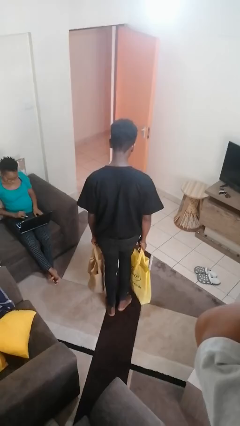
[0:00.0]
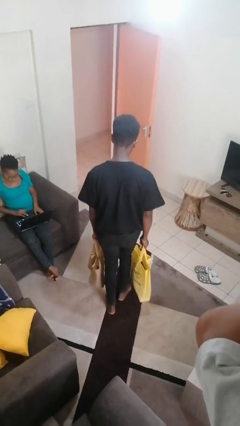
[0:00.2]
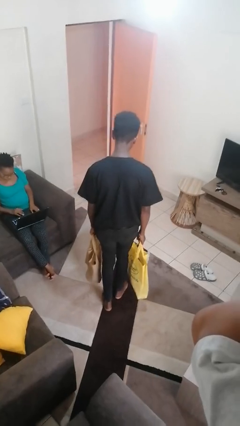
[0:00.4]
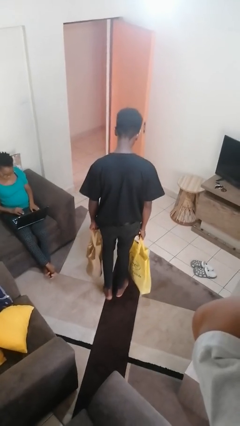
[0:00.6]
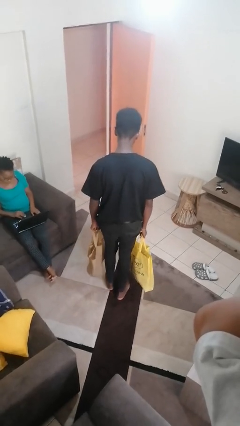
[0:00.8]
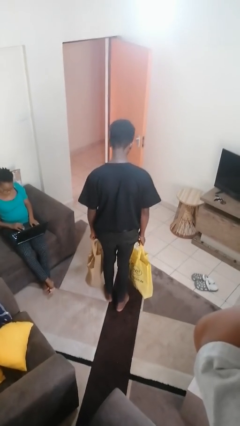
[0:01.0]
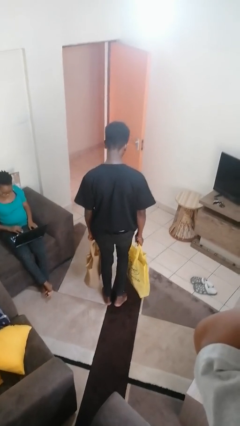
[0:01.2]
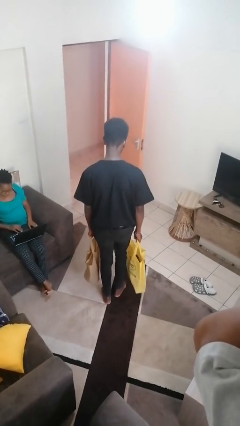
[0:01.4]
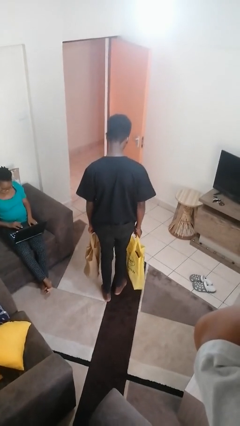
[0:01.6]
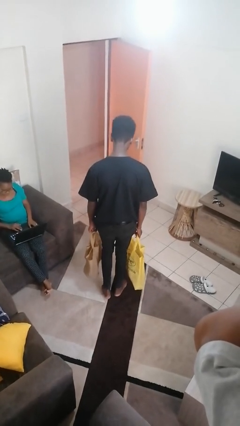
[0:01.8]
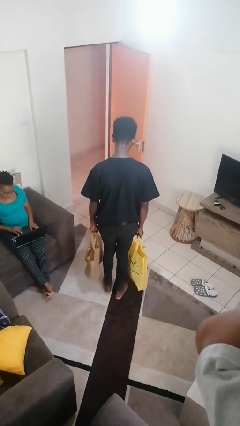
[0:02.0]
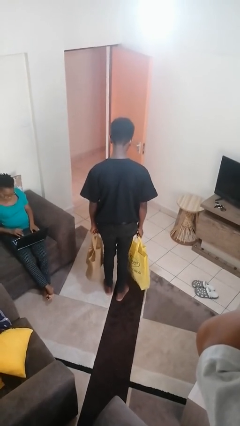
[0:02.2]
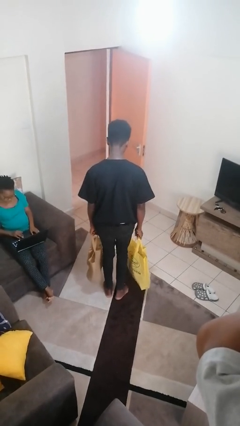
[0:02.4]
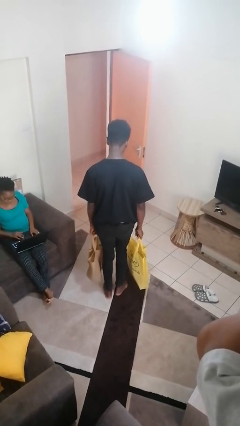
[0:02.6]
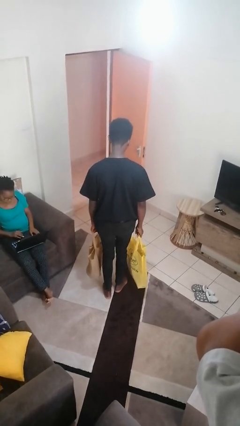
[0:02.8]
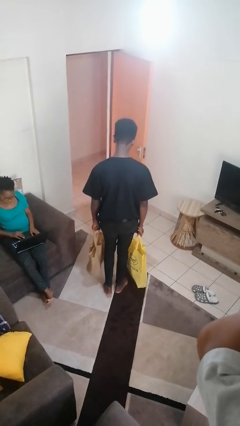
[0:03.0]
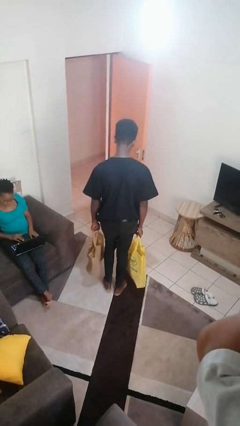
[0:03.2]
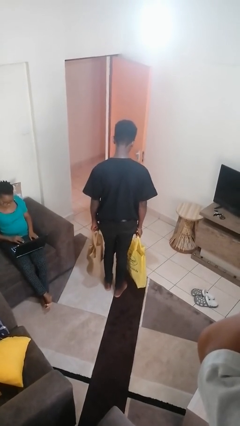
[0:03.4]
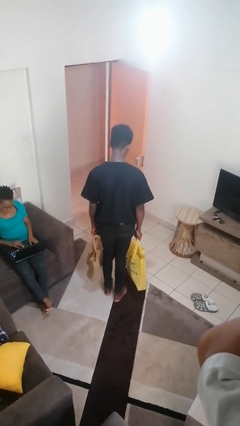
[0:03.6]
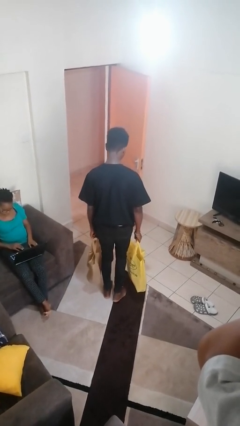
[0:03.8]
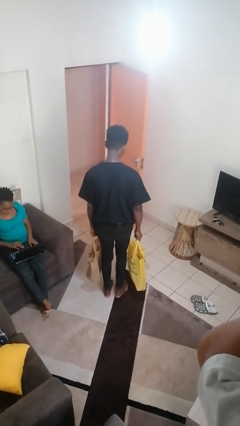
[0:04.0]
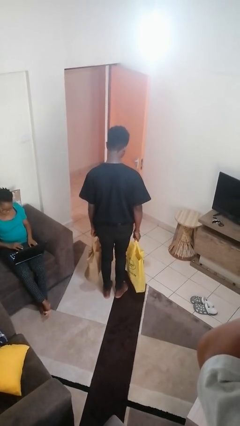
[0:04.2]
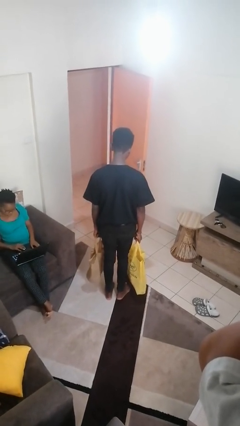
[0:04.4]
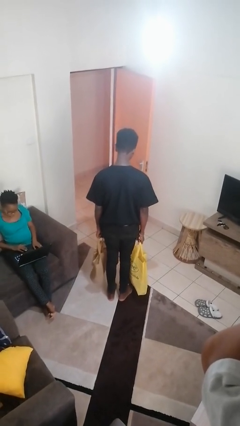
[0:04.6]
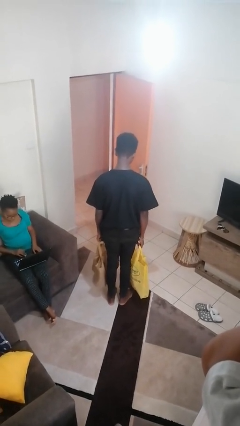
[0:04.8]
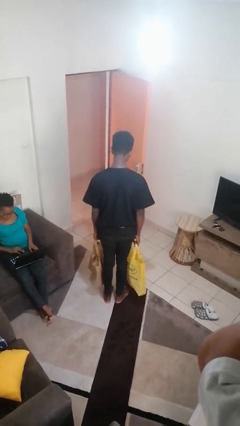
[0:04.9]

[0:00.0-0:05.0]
person carries groceries

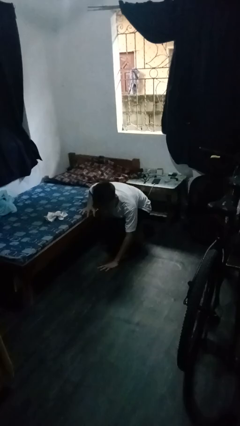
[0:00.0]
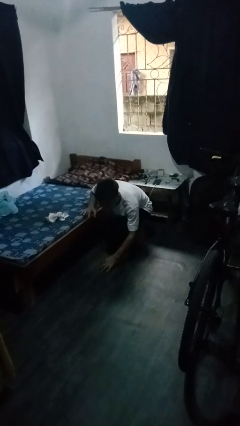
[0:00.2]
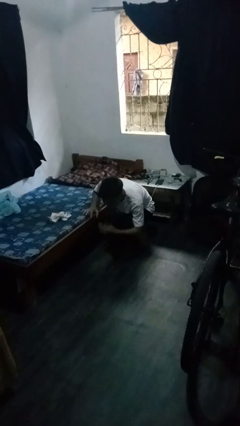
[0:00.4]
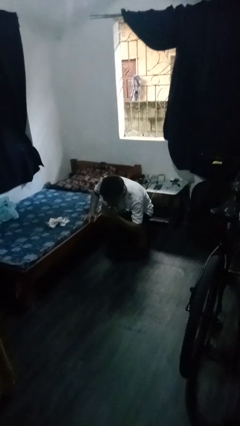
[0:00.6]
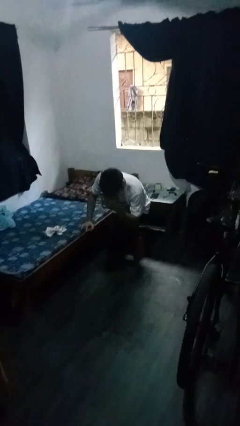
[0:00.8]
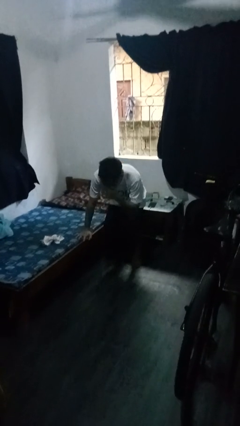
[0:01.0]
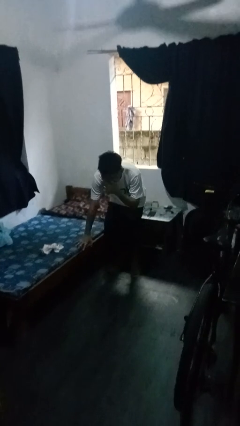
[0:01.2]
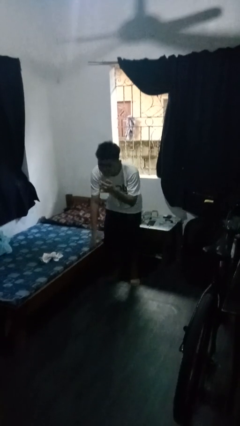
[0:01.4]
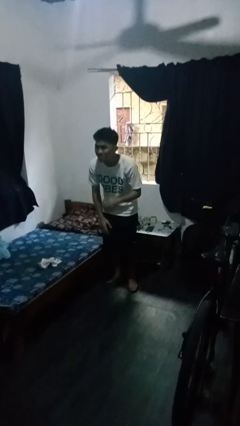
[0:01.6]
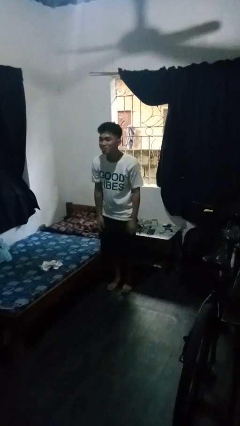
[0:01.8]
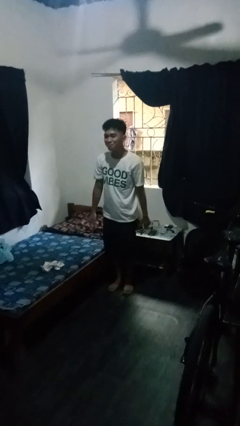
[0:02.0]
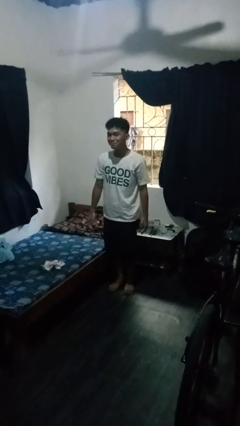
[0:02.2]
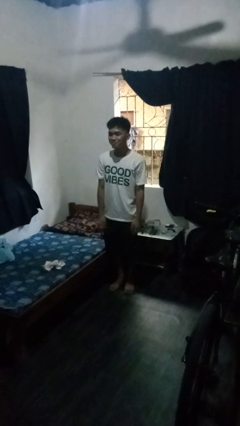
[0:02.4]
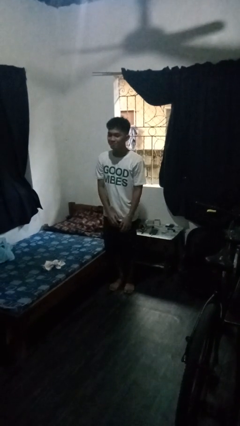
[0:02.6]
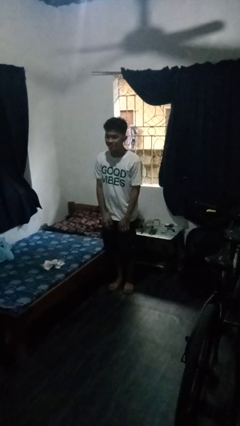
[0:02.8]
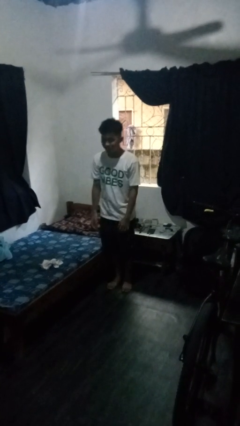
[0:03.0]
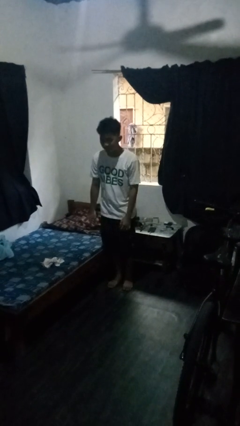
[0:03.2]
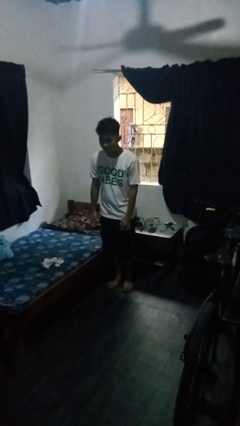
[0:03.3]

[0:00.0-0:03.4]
person stands up from floor

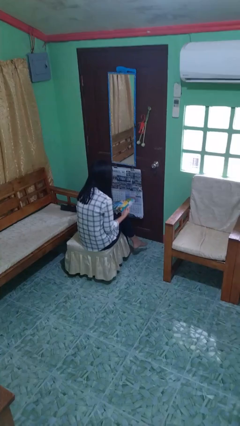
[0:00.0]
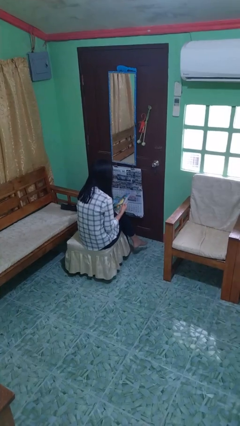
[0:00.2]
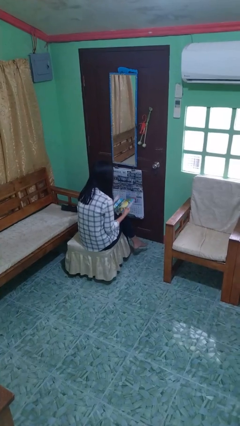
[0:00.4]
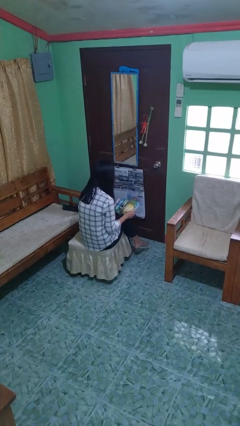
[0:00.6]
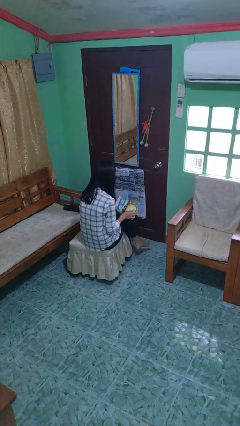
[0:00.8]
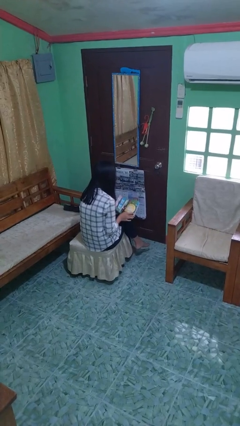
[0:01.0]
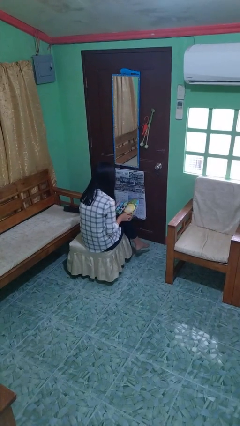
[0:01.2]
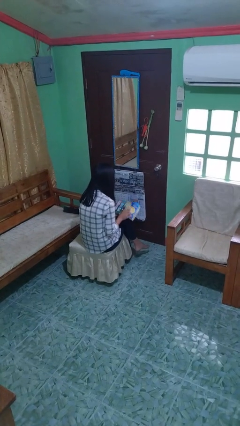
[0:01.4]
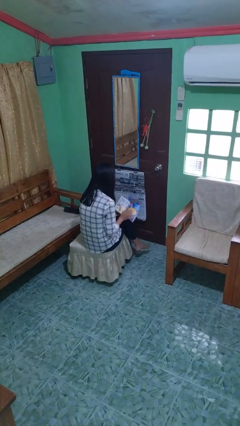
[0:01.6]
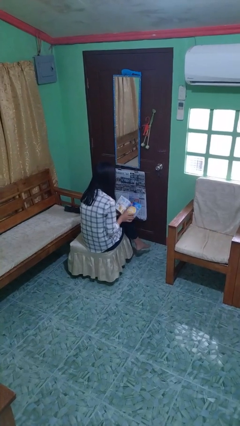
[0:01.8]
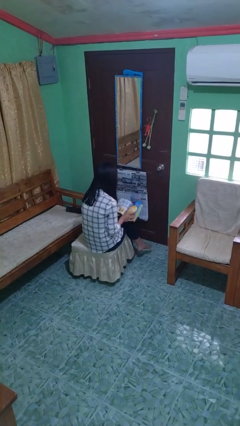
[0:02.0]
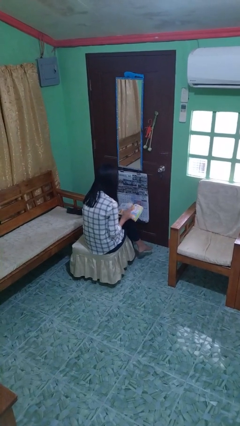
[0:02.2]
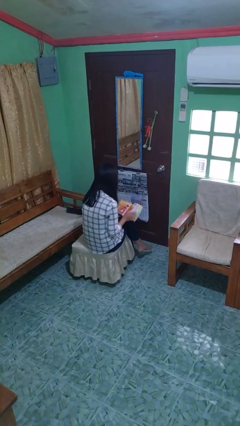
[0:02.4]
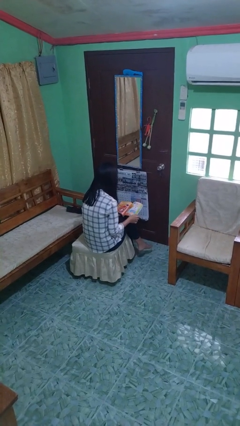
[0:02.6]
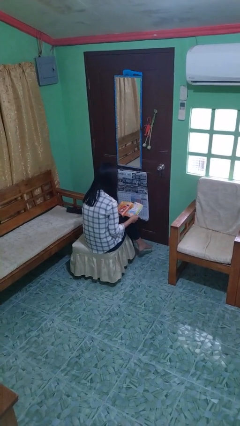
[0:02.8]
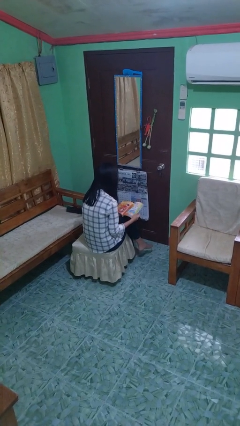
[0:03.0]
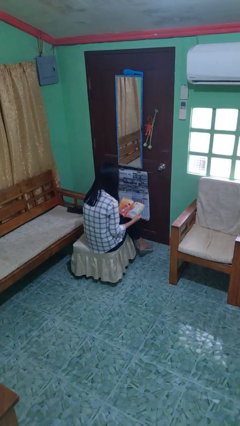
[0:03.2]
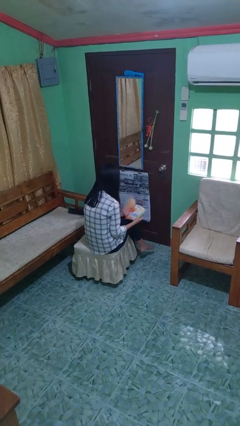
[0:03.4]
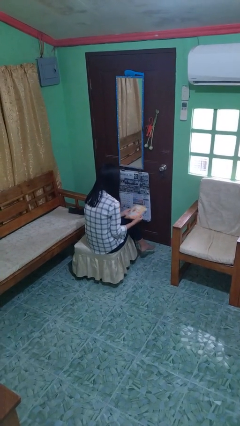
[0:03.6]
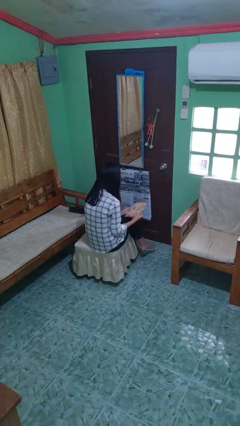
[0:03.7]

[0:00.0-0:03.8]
person reads magazine

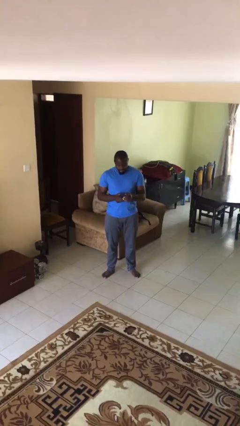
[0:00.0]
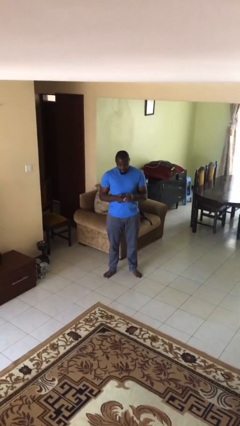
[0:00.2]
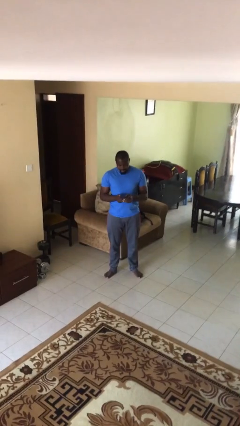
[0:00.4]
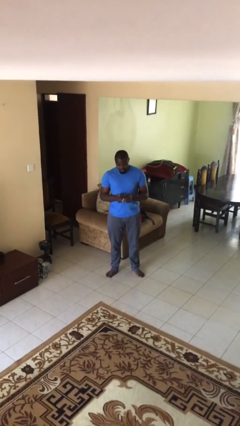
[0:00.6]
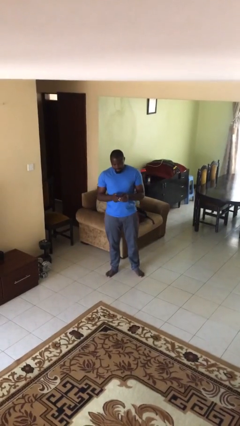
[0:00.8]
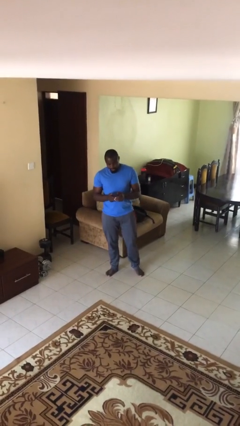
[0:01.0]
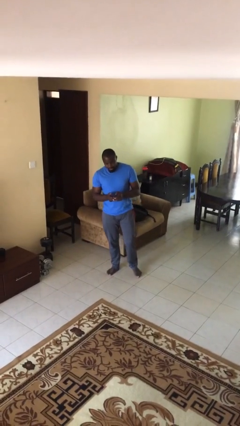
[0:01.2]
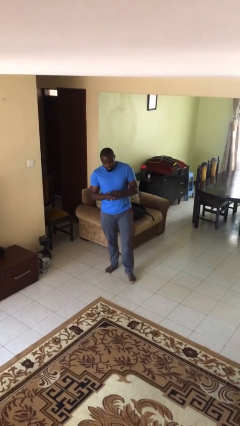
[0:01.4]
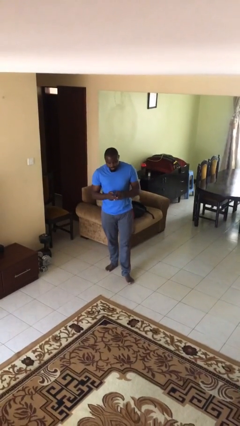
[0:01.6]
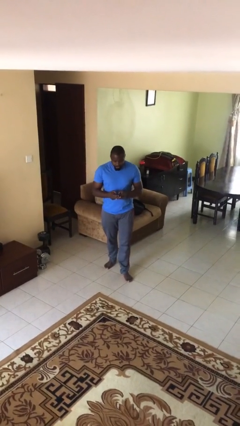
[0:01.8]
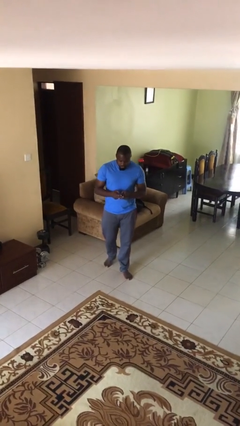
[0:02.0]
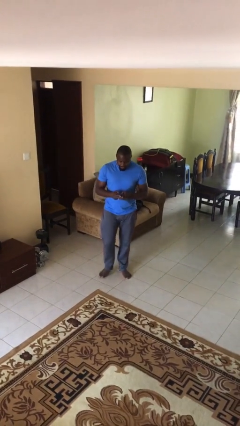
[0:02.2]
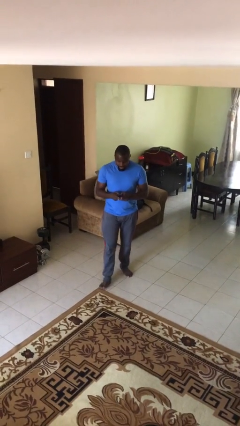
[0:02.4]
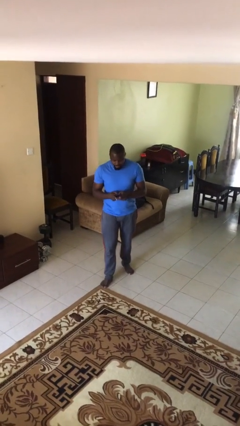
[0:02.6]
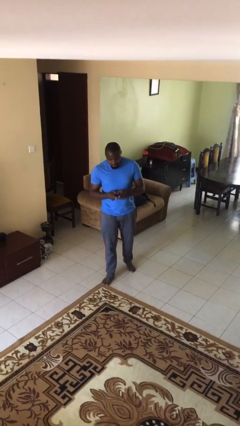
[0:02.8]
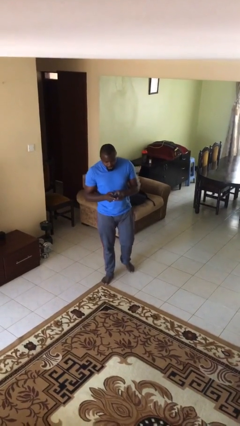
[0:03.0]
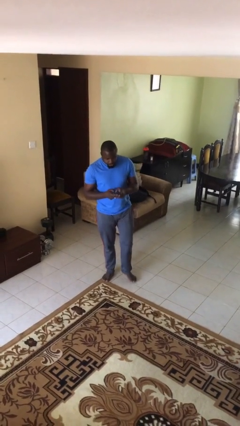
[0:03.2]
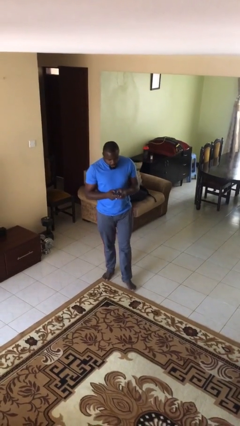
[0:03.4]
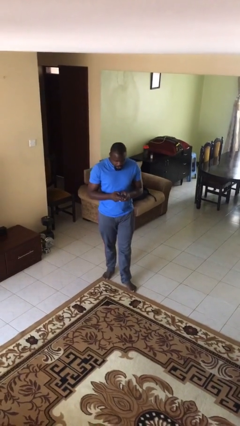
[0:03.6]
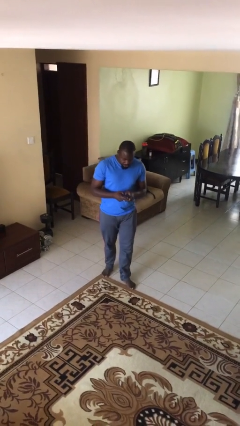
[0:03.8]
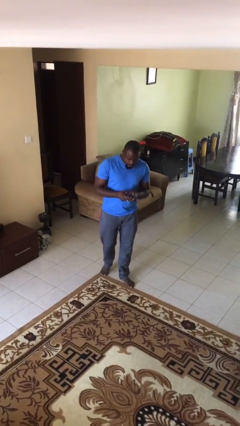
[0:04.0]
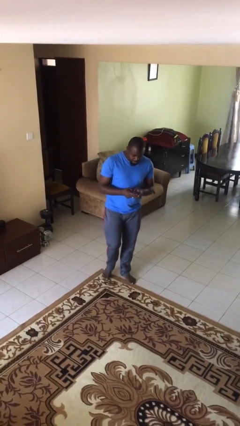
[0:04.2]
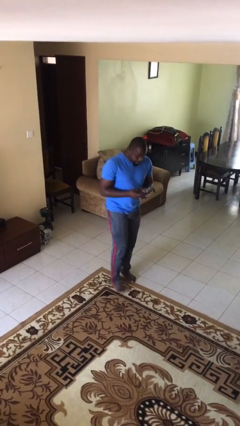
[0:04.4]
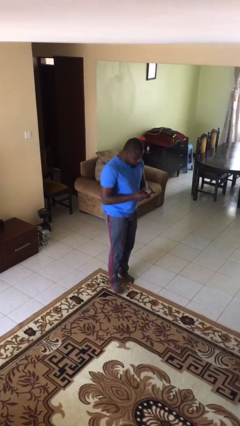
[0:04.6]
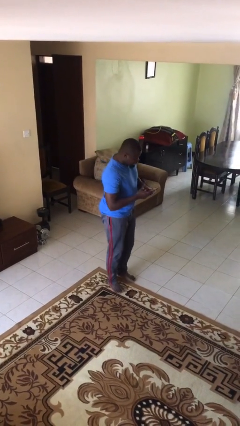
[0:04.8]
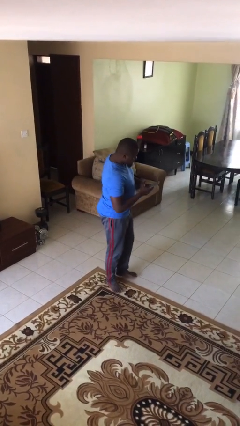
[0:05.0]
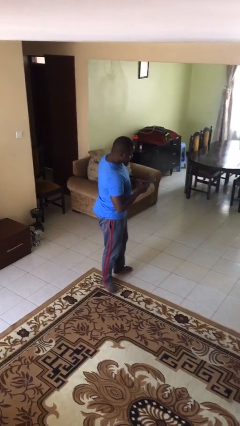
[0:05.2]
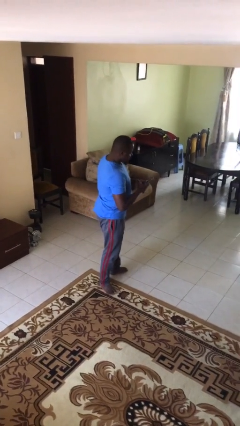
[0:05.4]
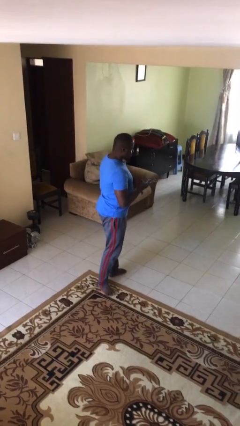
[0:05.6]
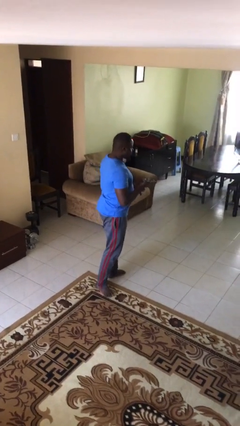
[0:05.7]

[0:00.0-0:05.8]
person texts on phone
